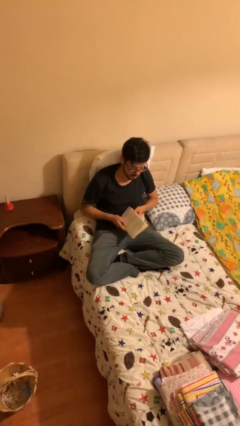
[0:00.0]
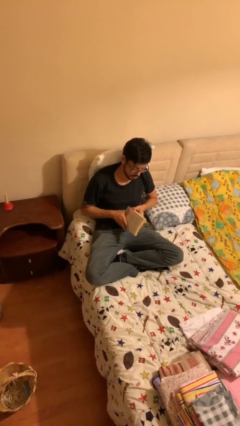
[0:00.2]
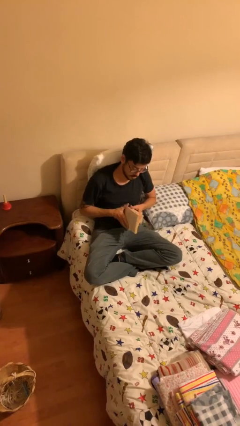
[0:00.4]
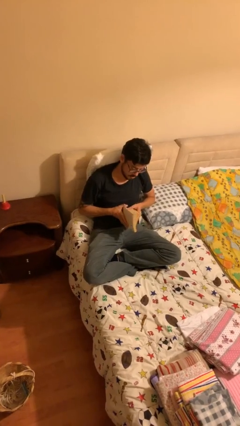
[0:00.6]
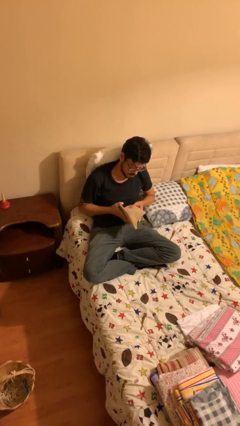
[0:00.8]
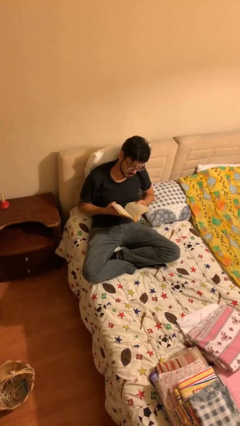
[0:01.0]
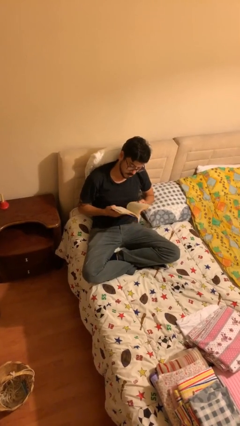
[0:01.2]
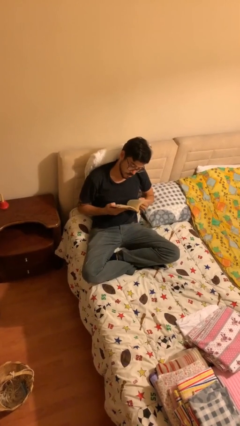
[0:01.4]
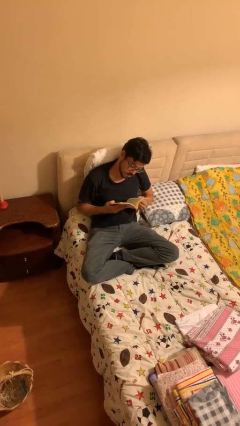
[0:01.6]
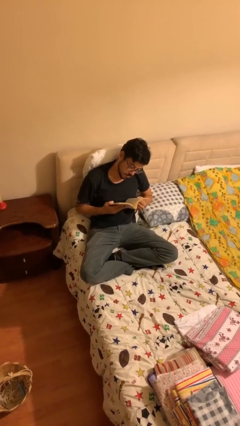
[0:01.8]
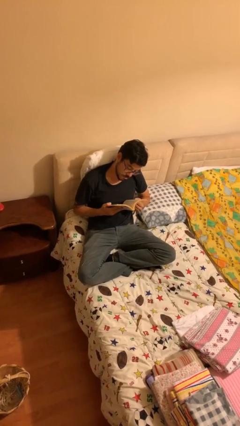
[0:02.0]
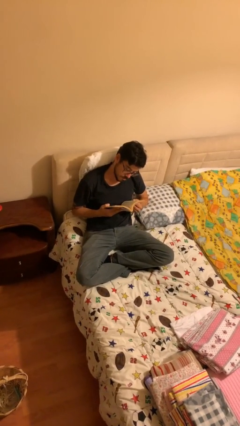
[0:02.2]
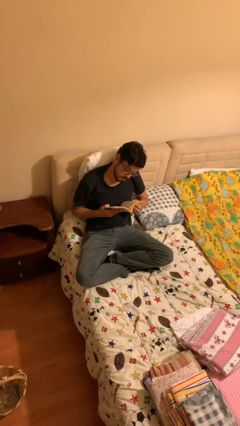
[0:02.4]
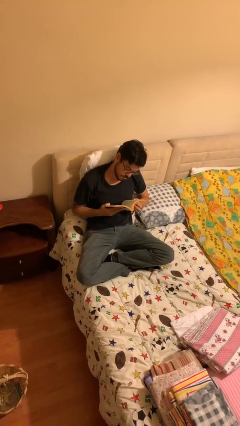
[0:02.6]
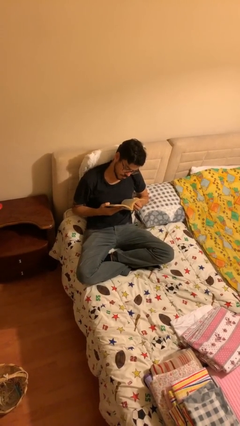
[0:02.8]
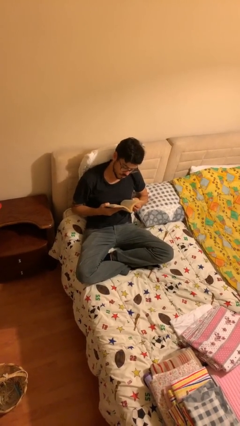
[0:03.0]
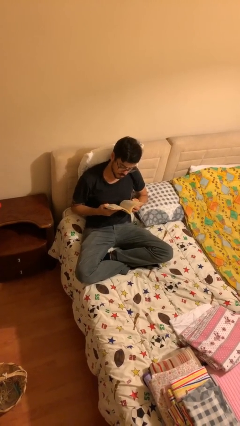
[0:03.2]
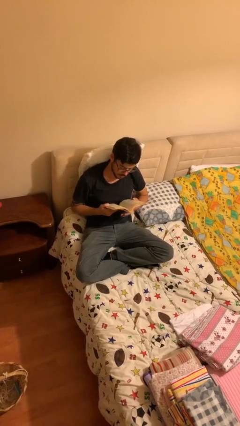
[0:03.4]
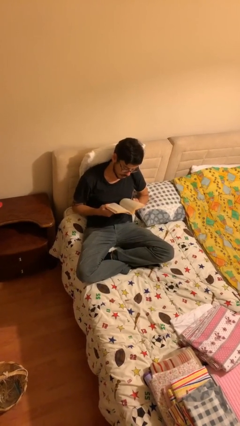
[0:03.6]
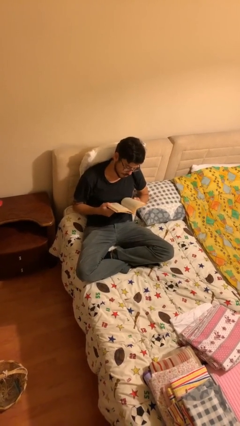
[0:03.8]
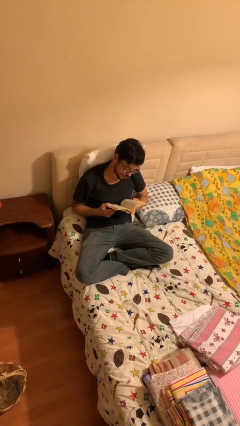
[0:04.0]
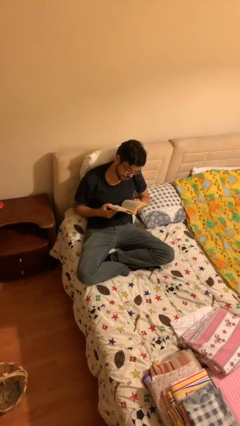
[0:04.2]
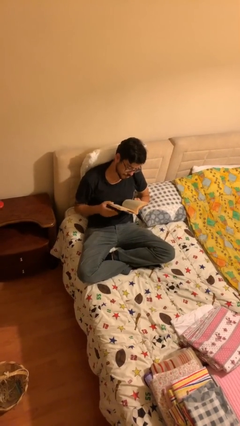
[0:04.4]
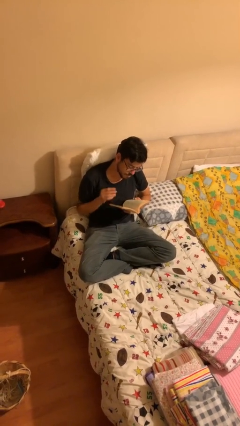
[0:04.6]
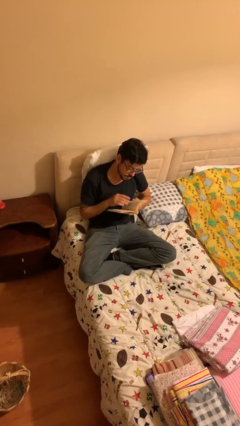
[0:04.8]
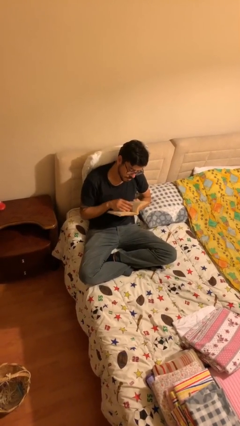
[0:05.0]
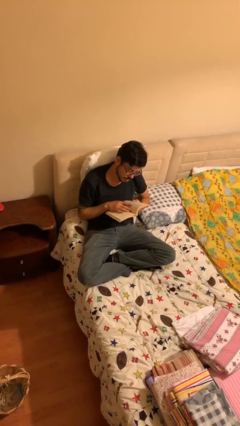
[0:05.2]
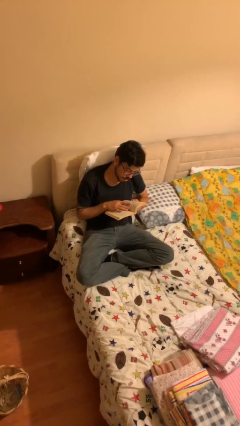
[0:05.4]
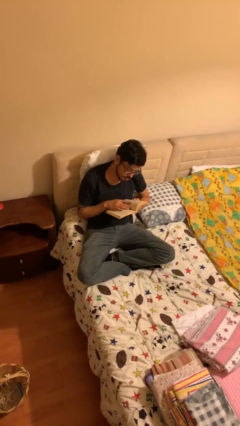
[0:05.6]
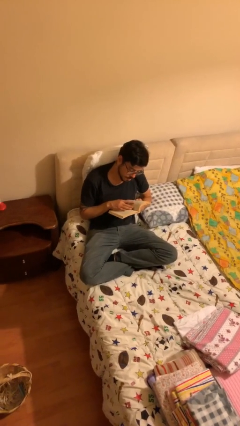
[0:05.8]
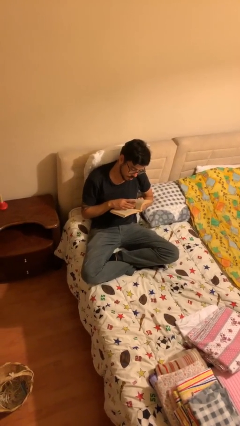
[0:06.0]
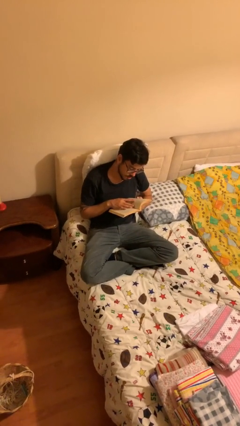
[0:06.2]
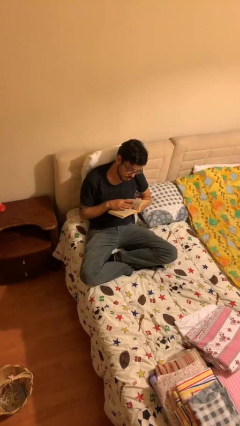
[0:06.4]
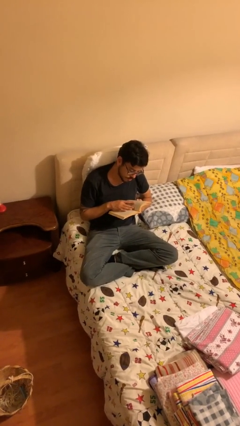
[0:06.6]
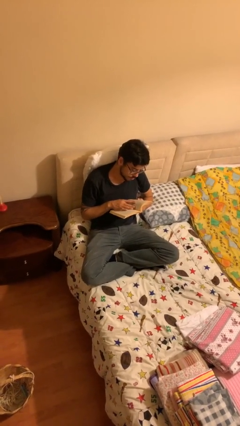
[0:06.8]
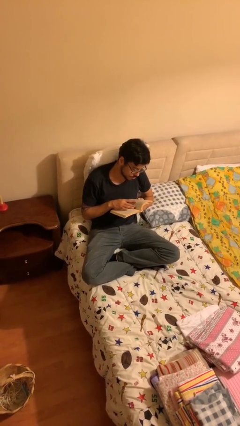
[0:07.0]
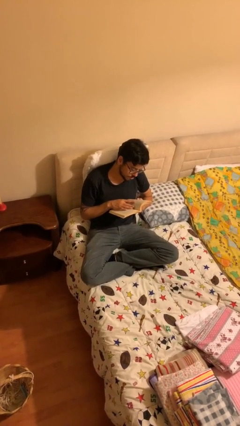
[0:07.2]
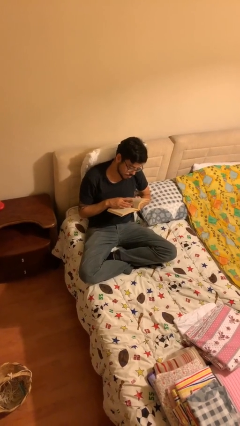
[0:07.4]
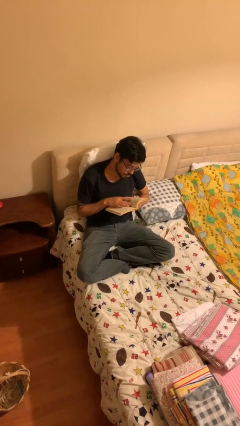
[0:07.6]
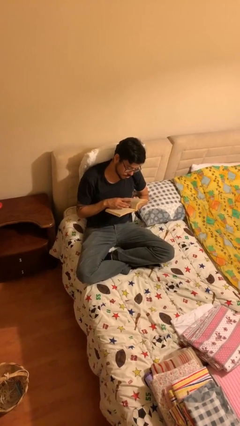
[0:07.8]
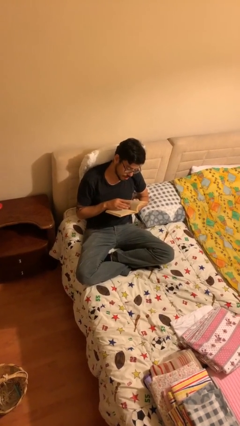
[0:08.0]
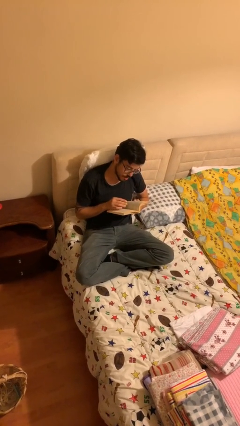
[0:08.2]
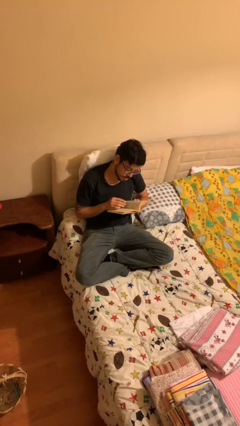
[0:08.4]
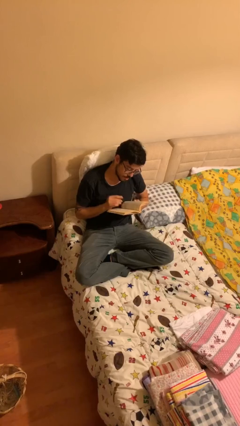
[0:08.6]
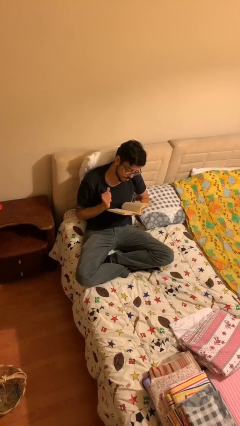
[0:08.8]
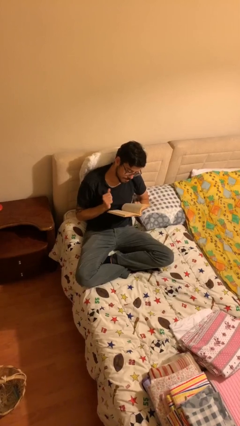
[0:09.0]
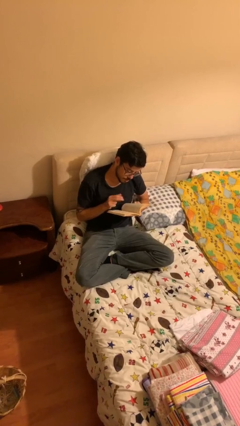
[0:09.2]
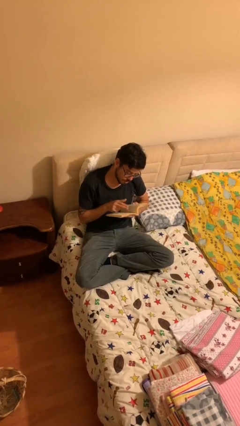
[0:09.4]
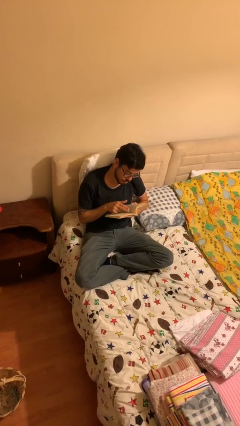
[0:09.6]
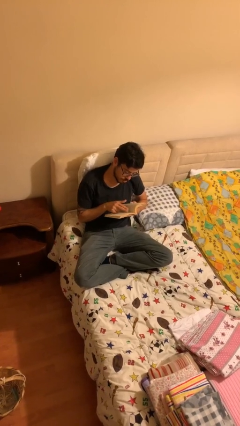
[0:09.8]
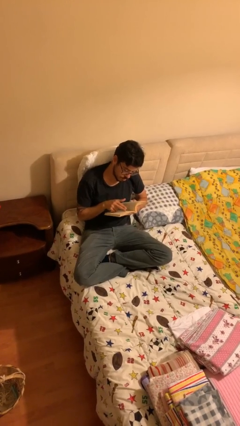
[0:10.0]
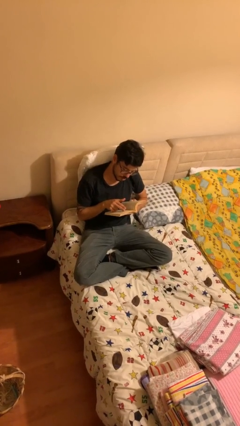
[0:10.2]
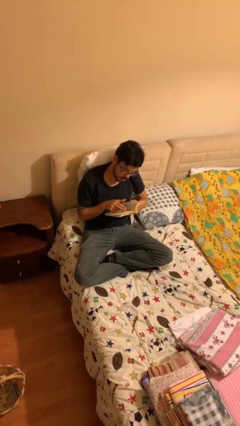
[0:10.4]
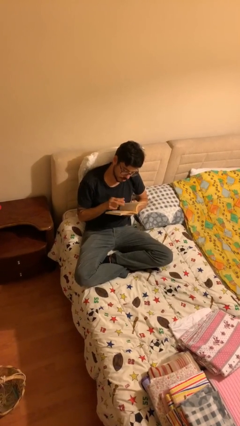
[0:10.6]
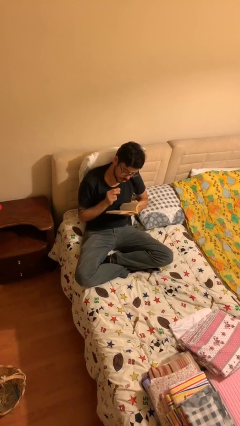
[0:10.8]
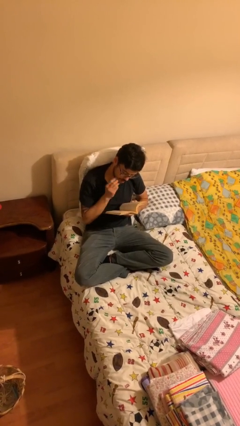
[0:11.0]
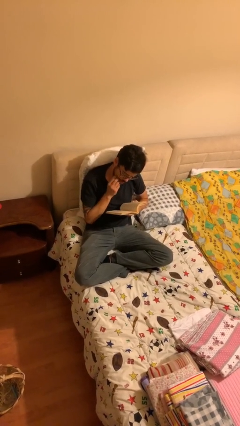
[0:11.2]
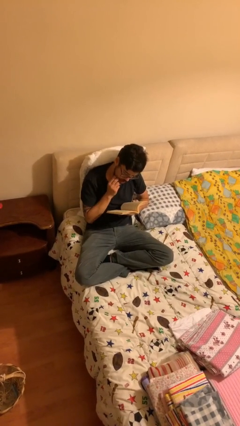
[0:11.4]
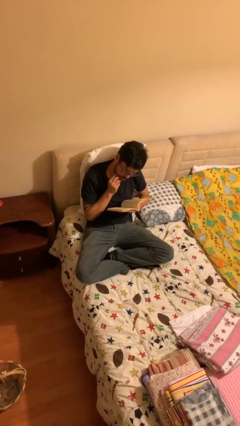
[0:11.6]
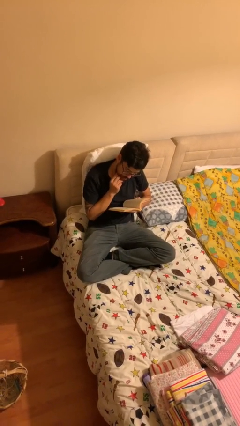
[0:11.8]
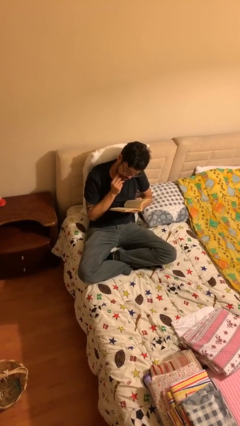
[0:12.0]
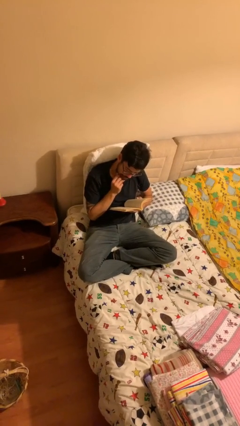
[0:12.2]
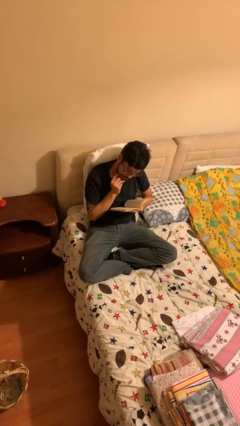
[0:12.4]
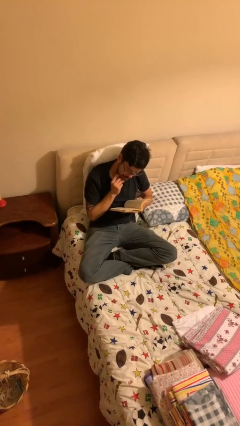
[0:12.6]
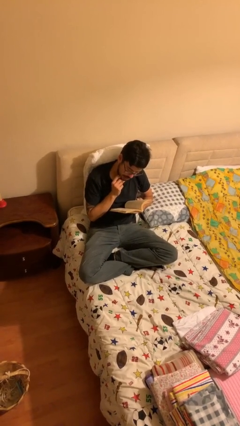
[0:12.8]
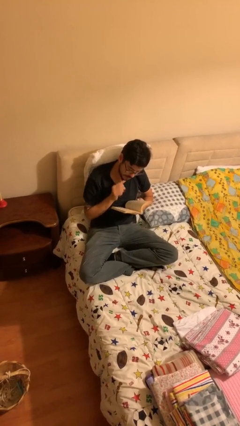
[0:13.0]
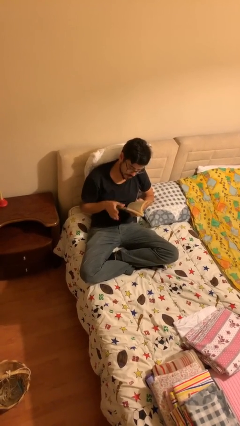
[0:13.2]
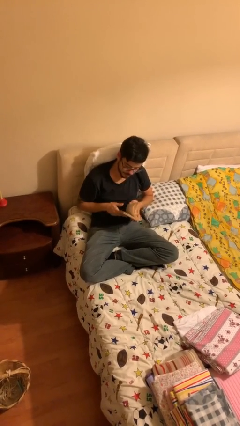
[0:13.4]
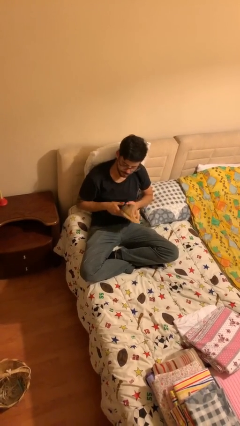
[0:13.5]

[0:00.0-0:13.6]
person reads document

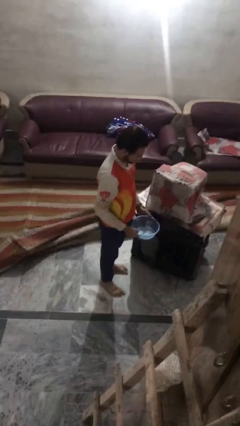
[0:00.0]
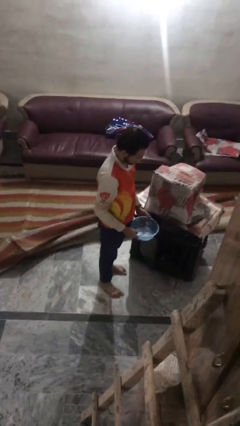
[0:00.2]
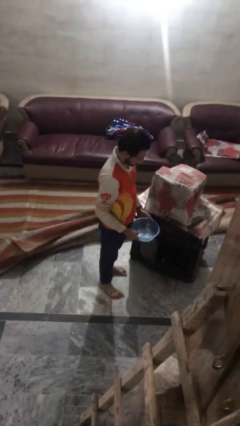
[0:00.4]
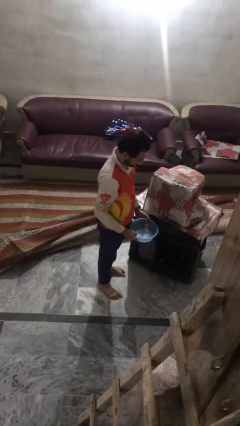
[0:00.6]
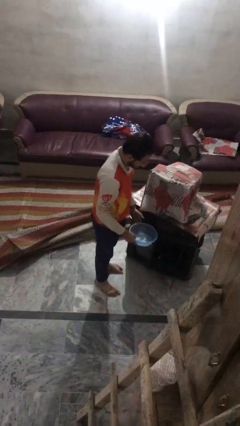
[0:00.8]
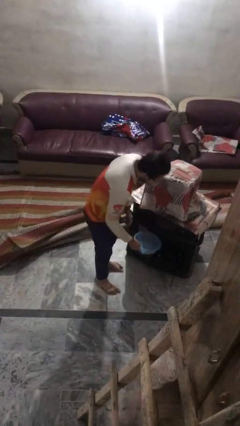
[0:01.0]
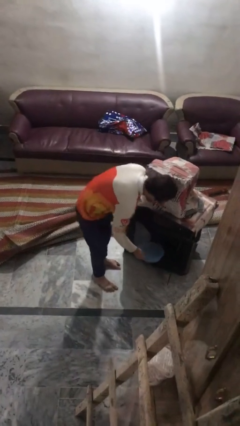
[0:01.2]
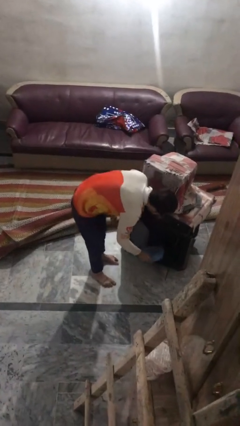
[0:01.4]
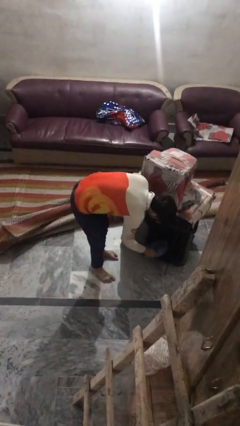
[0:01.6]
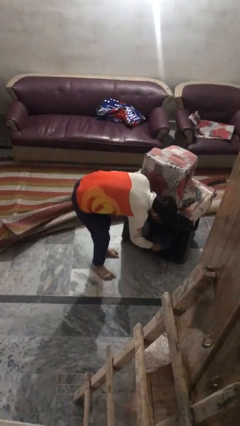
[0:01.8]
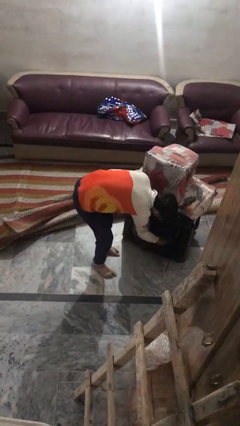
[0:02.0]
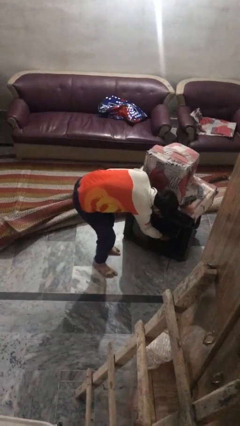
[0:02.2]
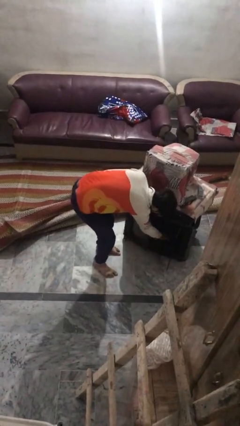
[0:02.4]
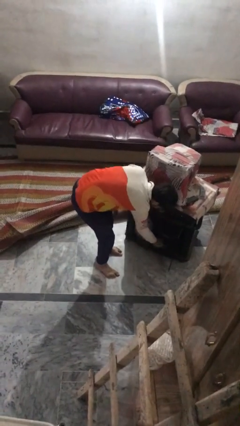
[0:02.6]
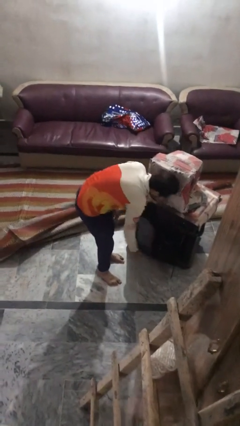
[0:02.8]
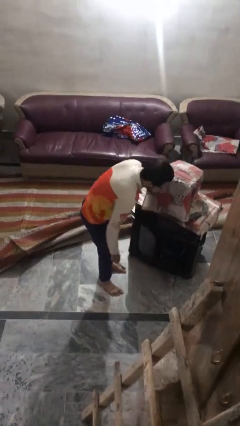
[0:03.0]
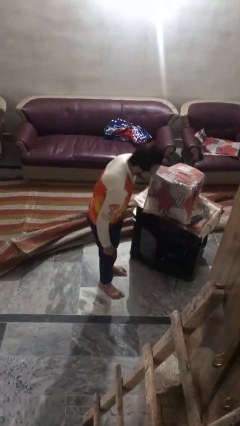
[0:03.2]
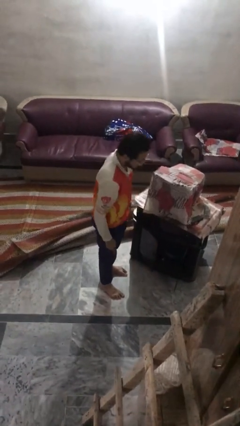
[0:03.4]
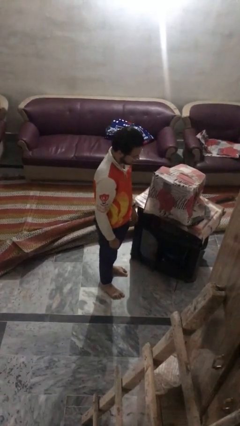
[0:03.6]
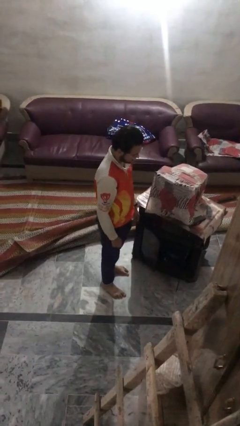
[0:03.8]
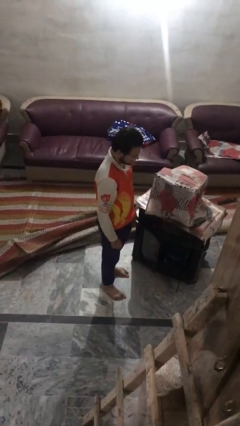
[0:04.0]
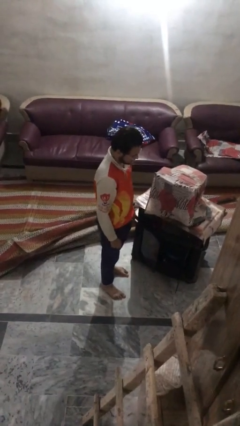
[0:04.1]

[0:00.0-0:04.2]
person puts down object into cabinet
